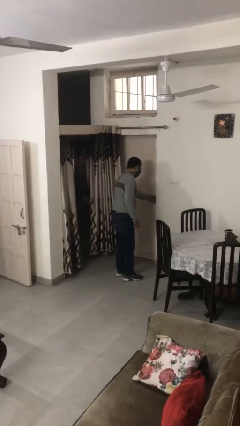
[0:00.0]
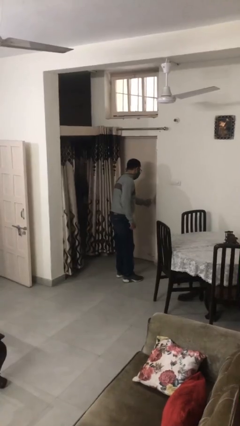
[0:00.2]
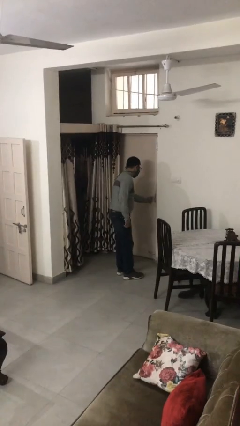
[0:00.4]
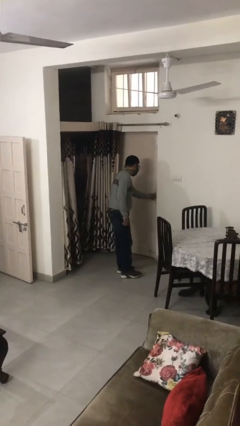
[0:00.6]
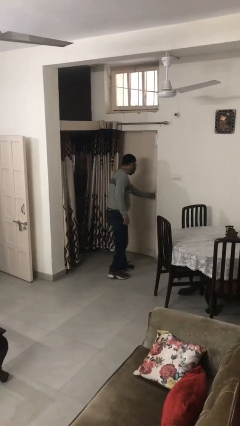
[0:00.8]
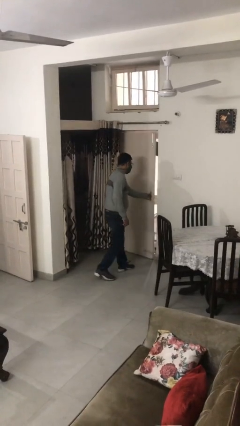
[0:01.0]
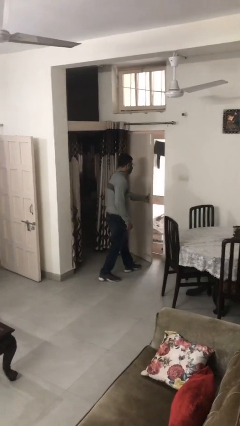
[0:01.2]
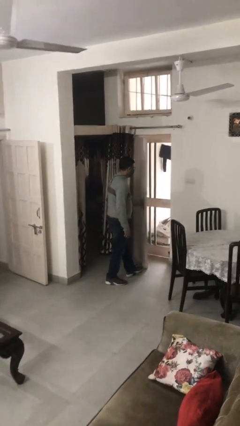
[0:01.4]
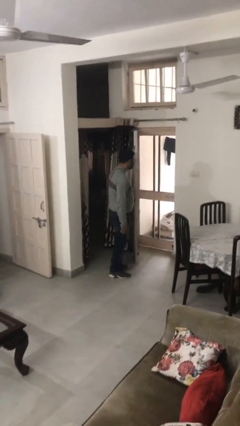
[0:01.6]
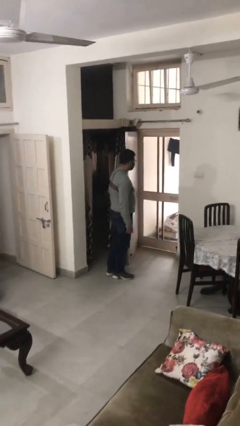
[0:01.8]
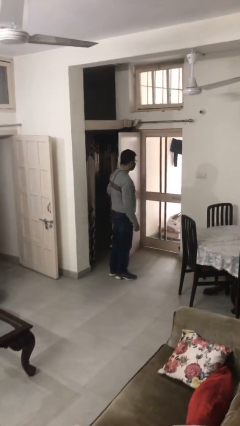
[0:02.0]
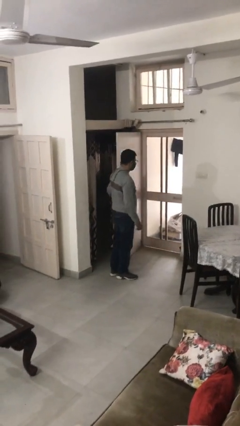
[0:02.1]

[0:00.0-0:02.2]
person opens facility door

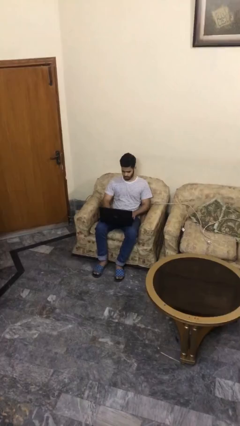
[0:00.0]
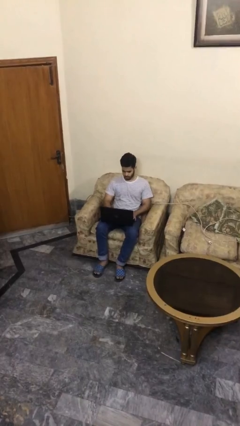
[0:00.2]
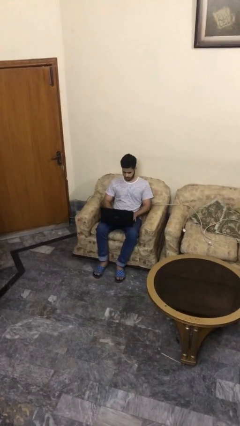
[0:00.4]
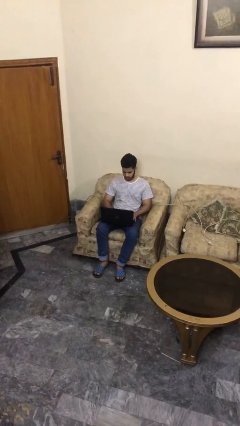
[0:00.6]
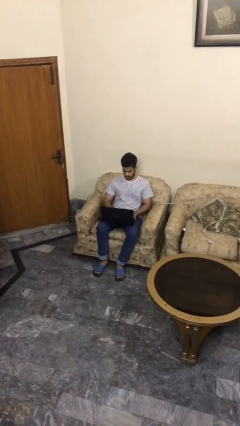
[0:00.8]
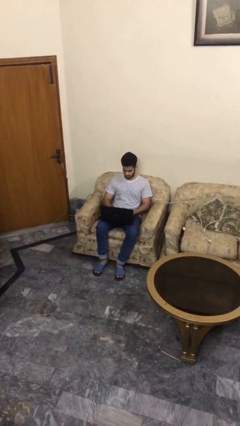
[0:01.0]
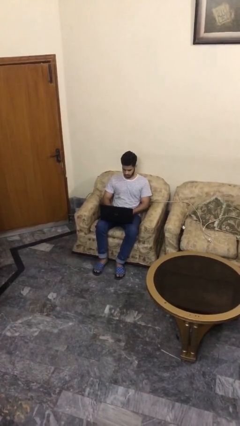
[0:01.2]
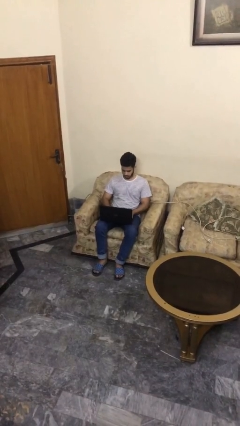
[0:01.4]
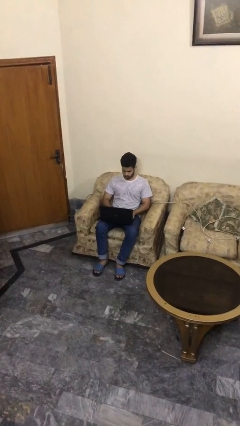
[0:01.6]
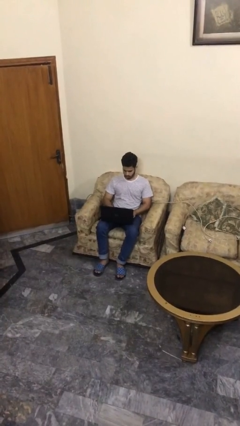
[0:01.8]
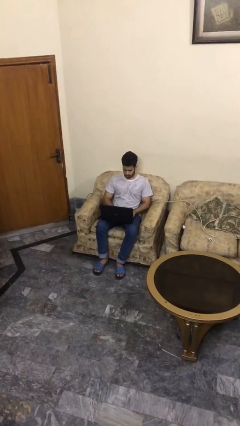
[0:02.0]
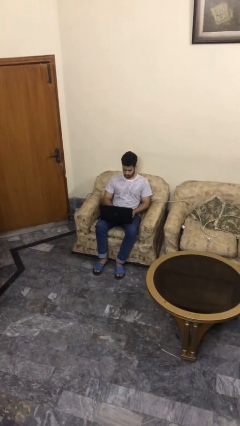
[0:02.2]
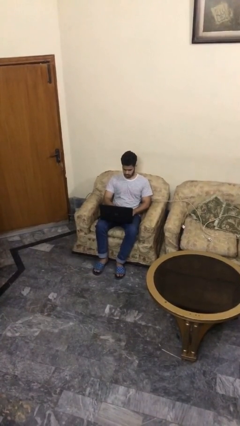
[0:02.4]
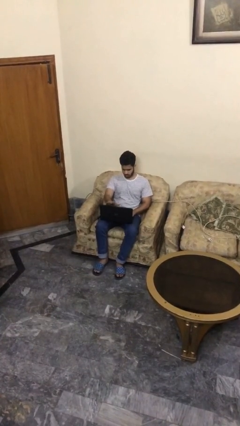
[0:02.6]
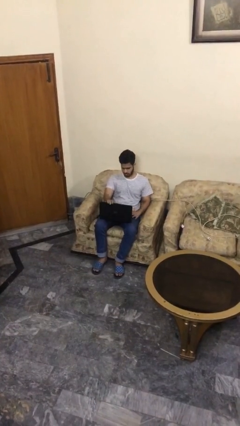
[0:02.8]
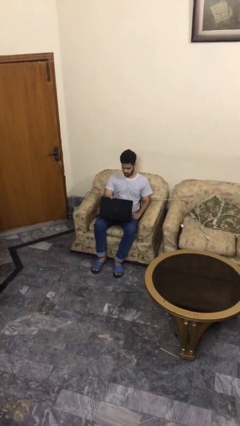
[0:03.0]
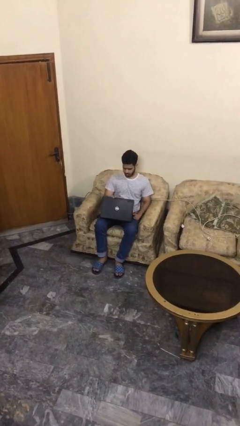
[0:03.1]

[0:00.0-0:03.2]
person interacts with laptop

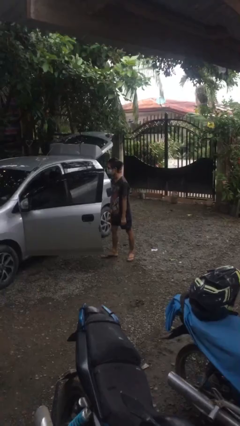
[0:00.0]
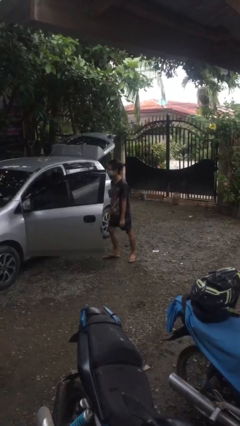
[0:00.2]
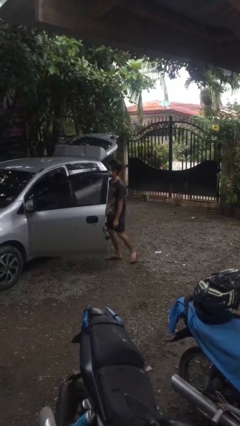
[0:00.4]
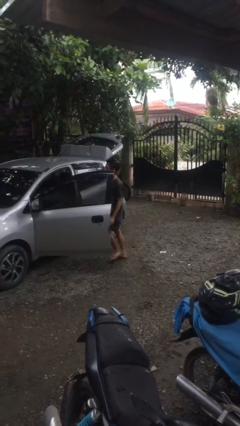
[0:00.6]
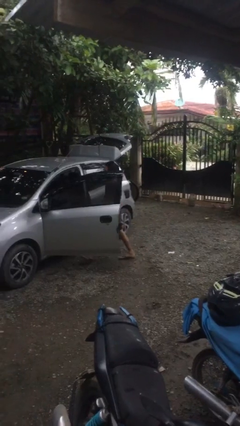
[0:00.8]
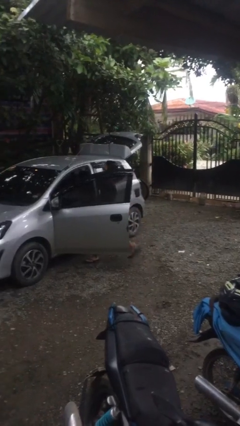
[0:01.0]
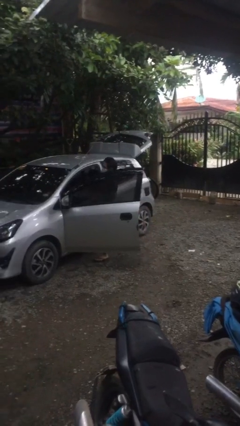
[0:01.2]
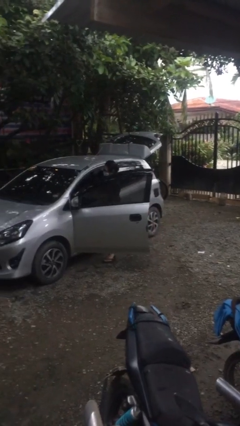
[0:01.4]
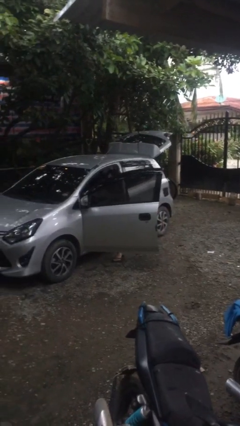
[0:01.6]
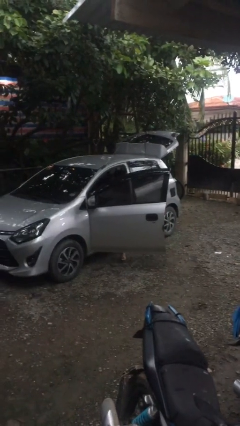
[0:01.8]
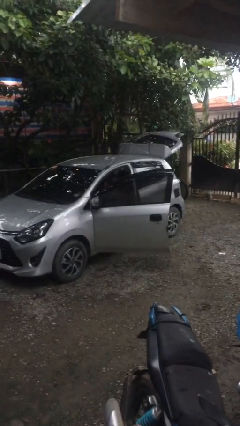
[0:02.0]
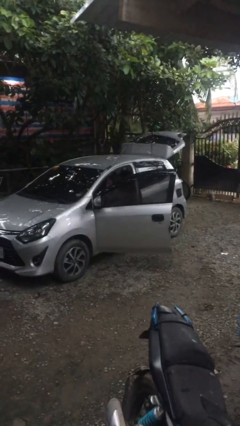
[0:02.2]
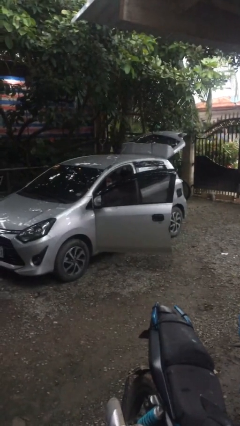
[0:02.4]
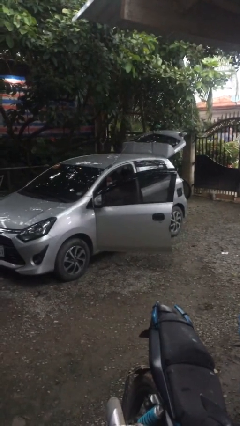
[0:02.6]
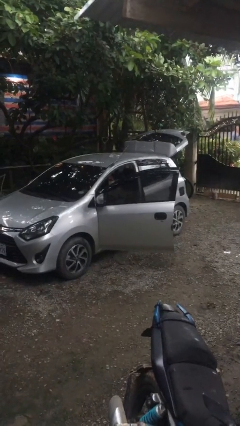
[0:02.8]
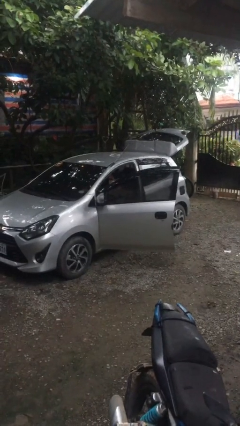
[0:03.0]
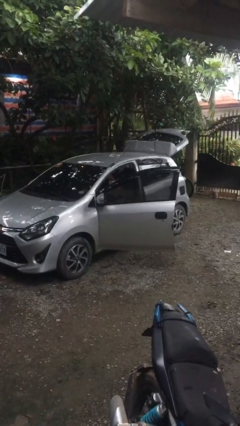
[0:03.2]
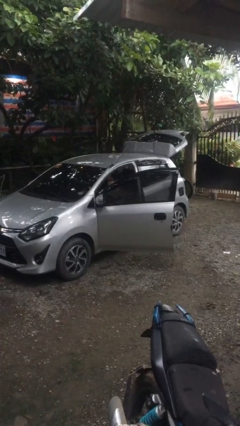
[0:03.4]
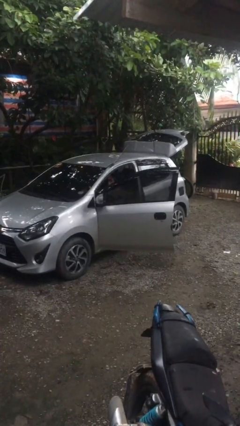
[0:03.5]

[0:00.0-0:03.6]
person enters car

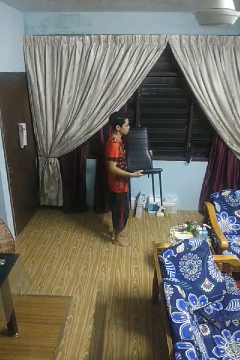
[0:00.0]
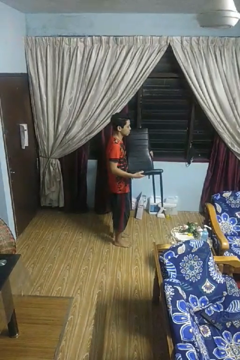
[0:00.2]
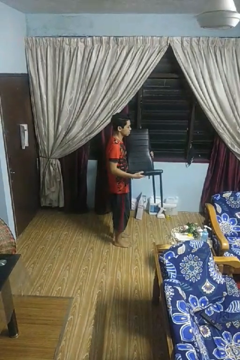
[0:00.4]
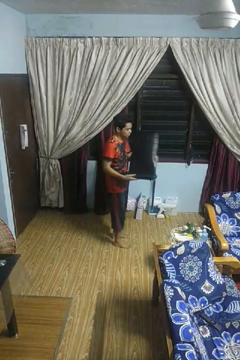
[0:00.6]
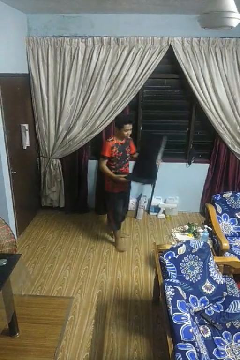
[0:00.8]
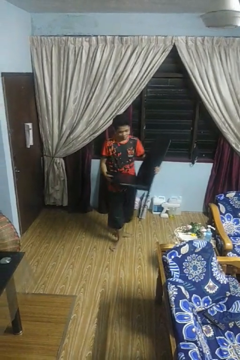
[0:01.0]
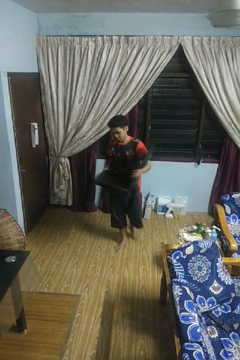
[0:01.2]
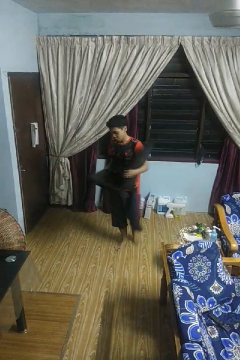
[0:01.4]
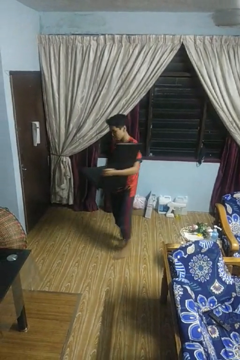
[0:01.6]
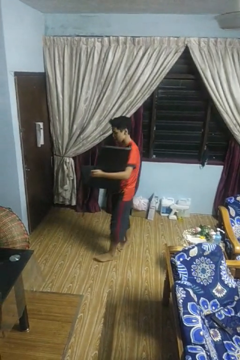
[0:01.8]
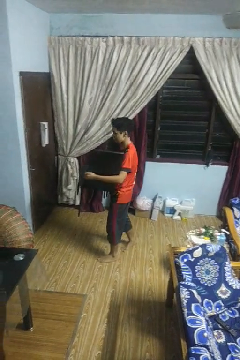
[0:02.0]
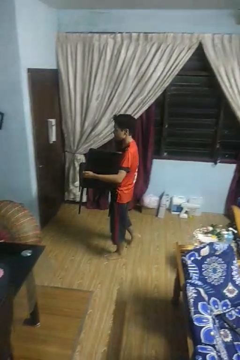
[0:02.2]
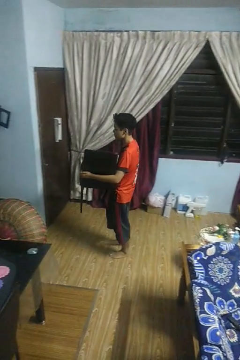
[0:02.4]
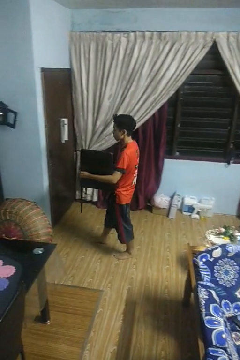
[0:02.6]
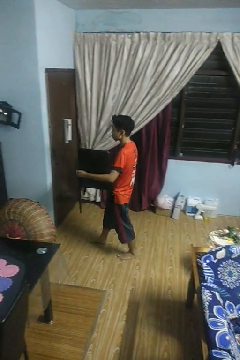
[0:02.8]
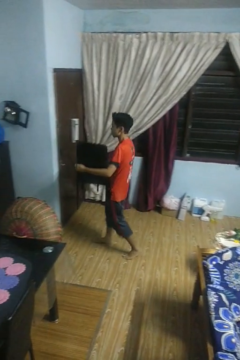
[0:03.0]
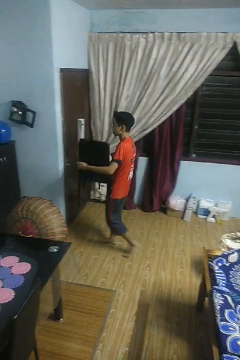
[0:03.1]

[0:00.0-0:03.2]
person carries furniture

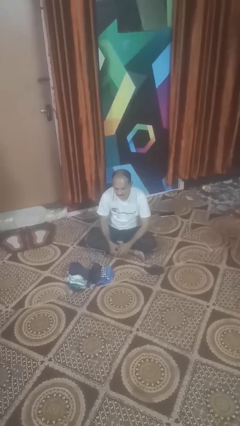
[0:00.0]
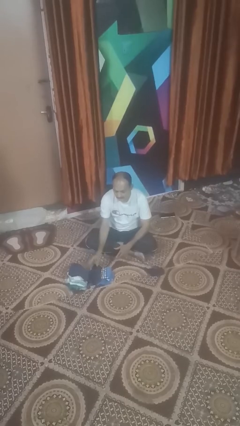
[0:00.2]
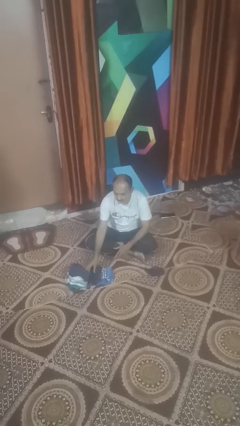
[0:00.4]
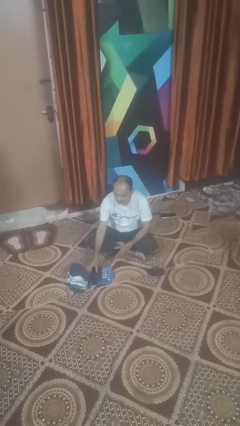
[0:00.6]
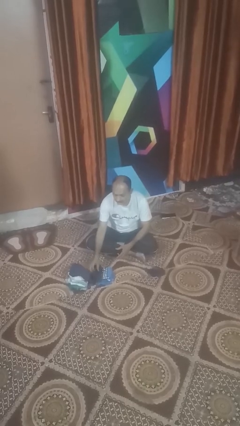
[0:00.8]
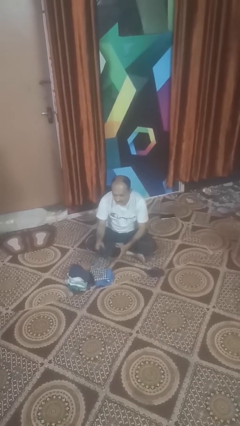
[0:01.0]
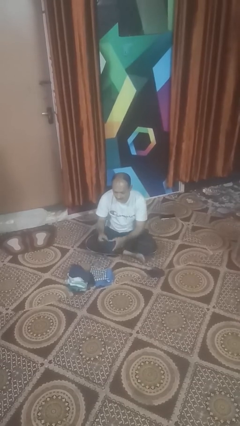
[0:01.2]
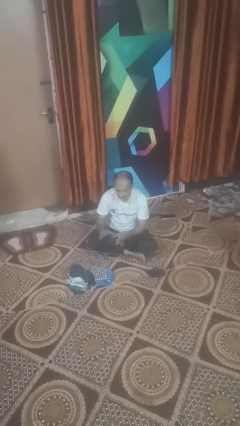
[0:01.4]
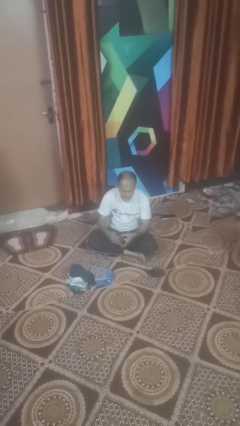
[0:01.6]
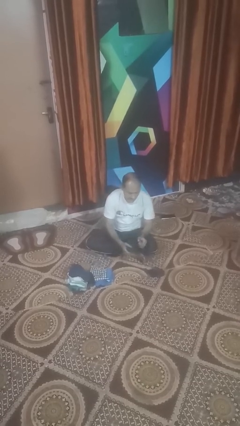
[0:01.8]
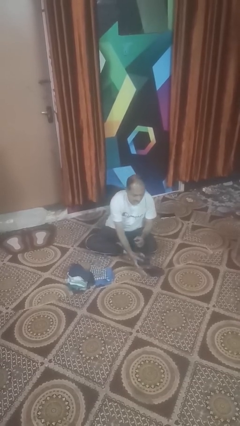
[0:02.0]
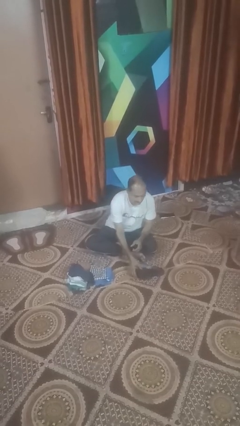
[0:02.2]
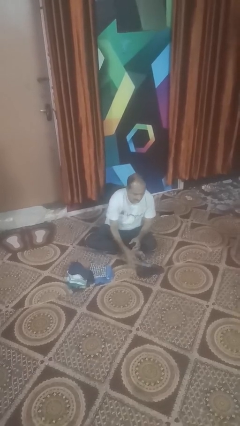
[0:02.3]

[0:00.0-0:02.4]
person folds socks

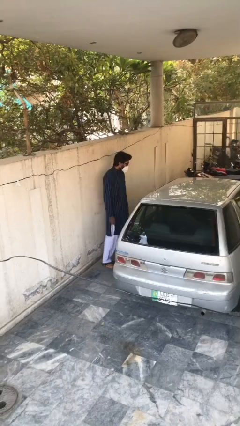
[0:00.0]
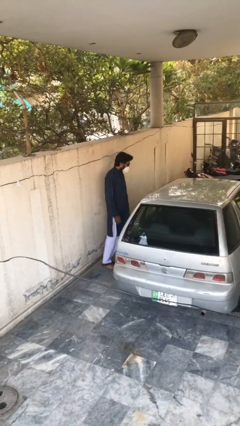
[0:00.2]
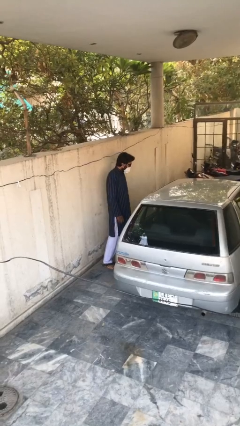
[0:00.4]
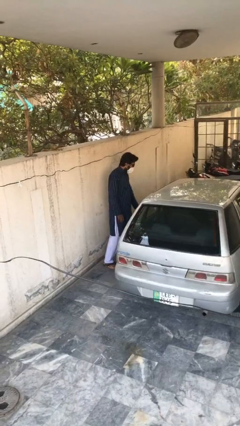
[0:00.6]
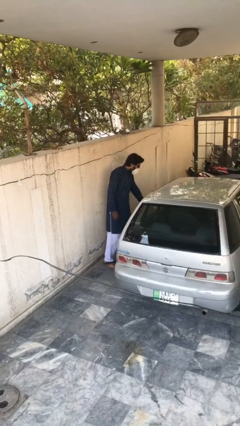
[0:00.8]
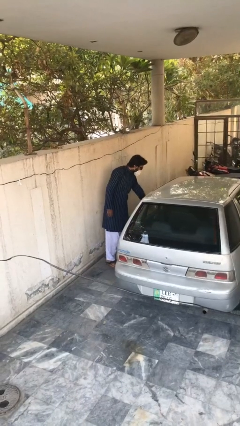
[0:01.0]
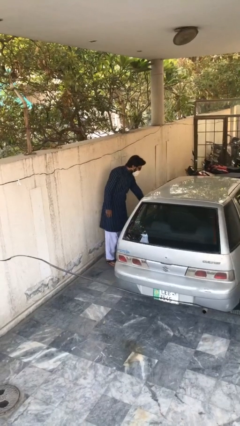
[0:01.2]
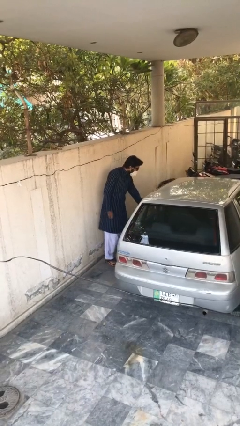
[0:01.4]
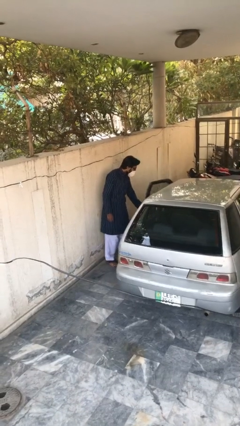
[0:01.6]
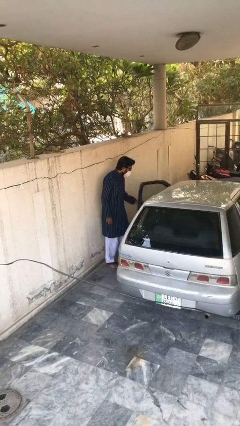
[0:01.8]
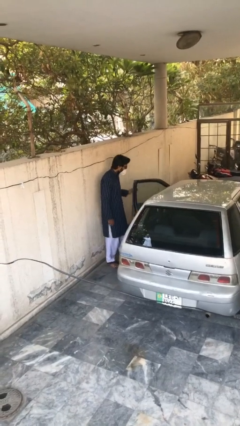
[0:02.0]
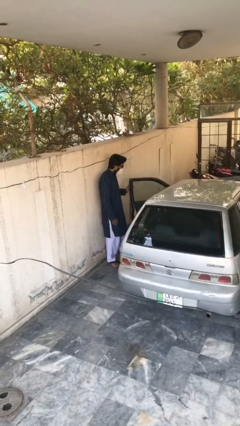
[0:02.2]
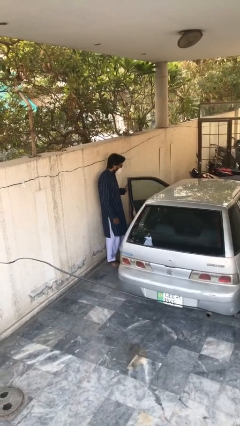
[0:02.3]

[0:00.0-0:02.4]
person opens car door

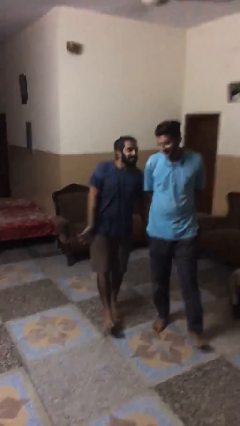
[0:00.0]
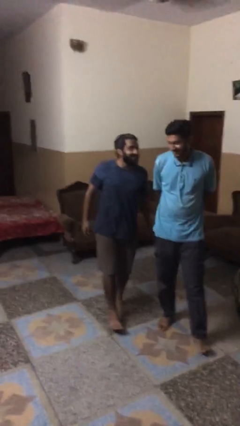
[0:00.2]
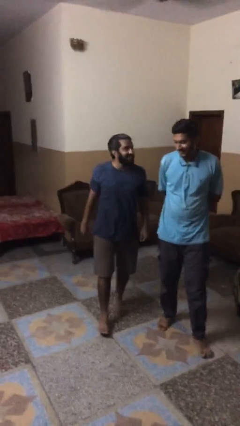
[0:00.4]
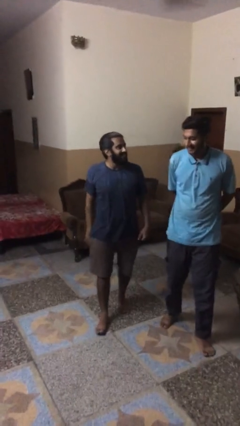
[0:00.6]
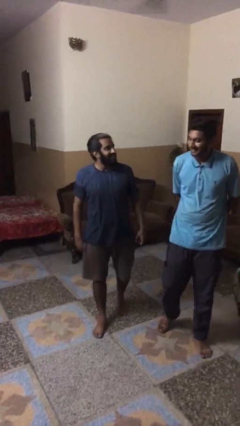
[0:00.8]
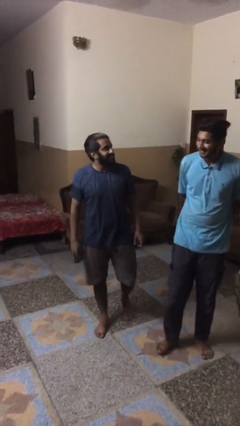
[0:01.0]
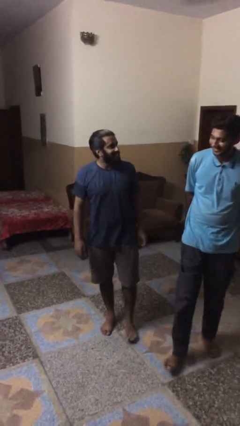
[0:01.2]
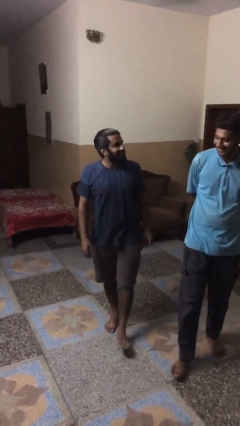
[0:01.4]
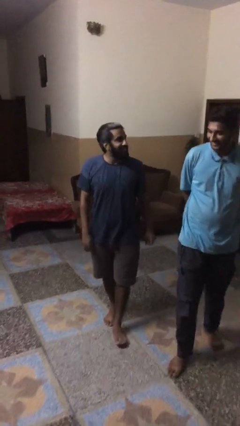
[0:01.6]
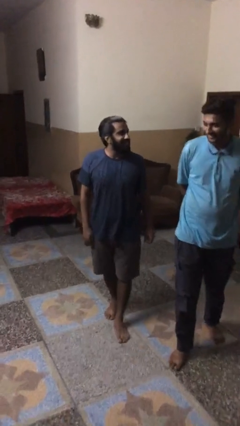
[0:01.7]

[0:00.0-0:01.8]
person talks to person
